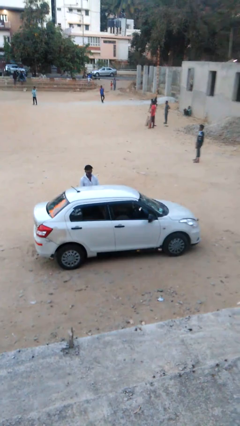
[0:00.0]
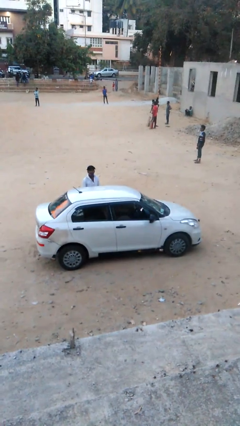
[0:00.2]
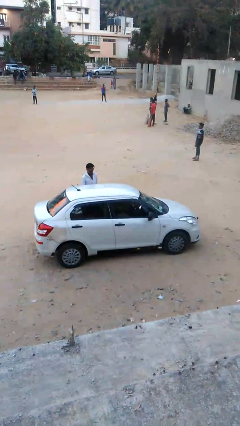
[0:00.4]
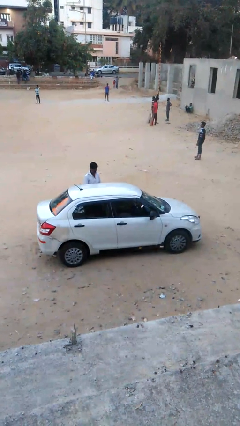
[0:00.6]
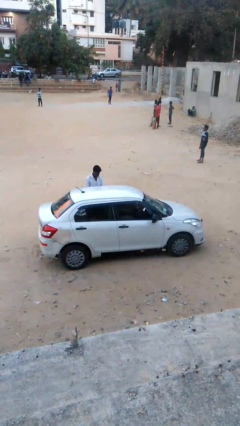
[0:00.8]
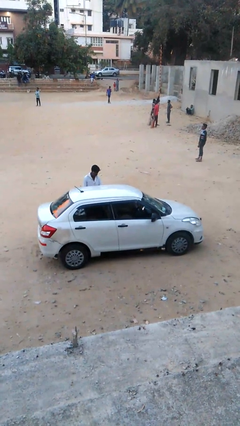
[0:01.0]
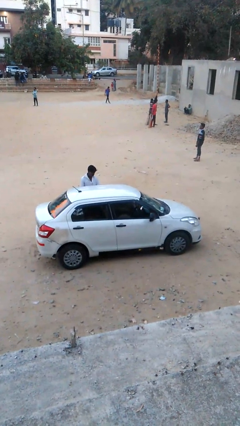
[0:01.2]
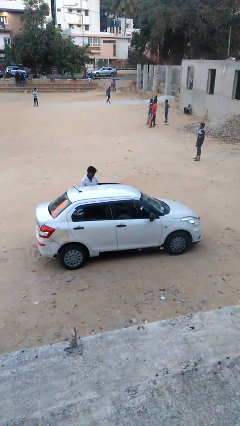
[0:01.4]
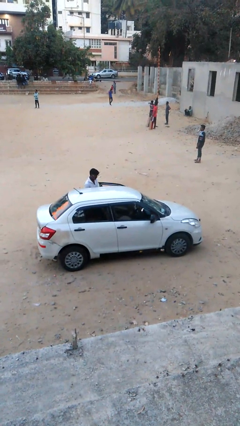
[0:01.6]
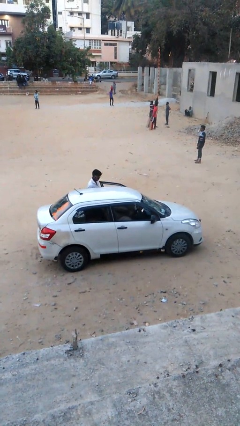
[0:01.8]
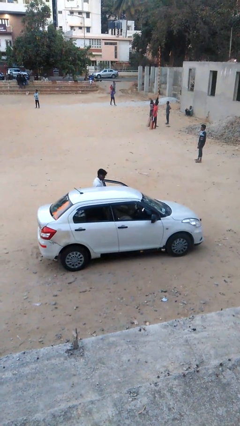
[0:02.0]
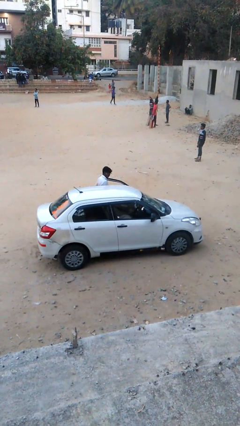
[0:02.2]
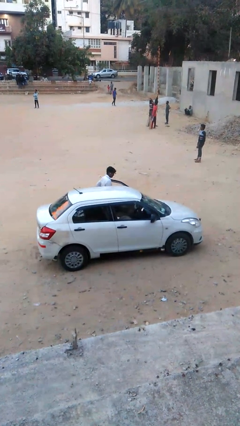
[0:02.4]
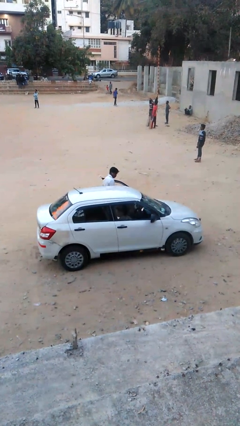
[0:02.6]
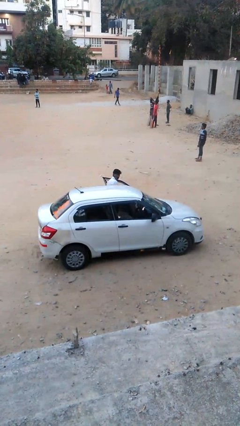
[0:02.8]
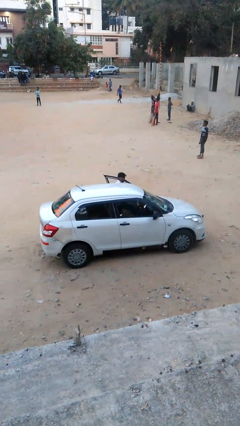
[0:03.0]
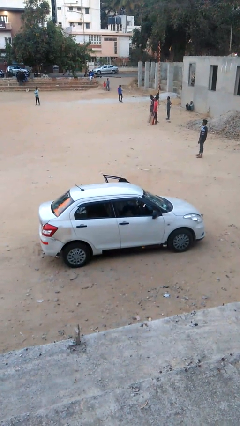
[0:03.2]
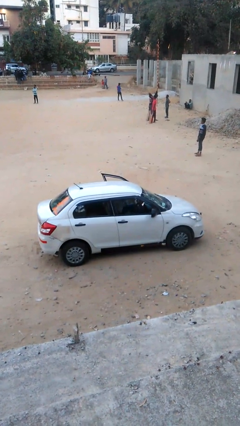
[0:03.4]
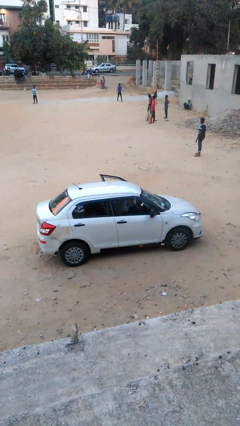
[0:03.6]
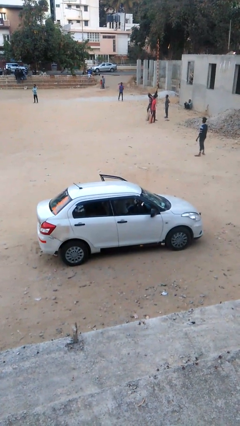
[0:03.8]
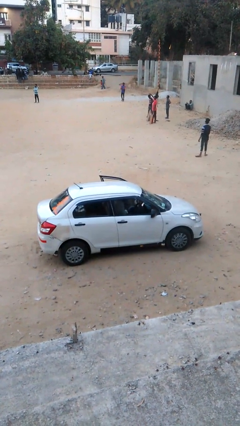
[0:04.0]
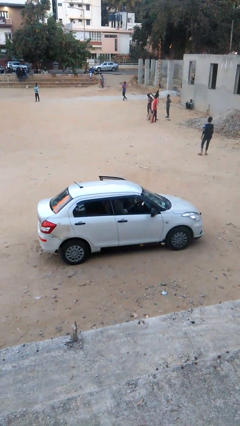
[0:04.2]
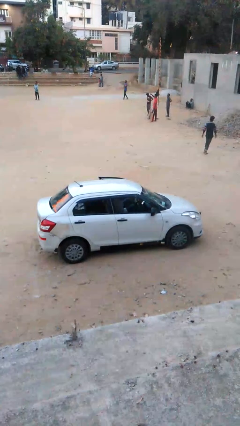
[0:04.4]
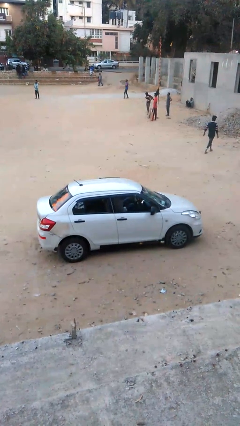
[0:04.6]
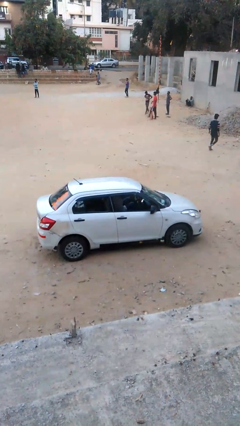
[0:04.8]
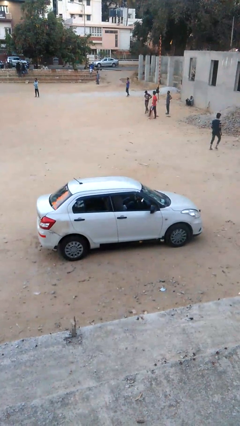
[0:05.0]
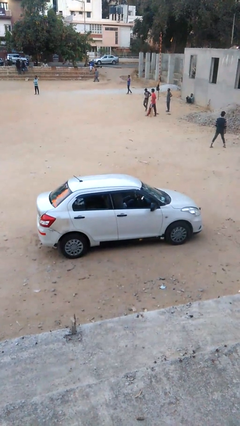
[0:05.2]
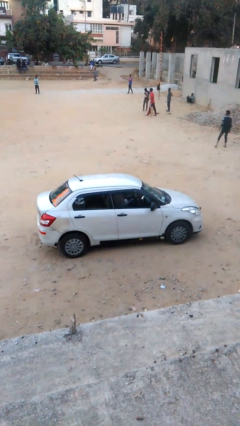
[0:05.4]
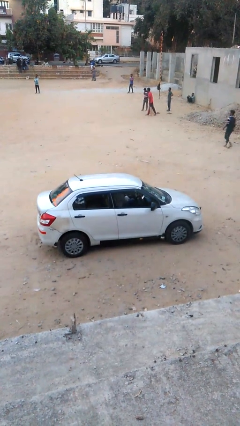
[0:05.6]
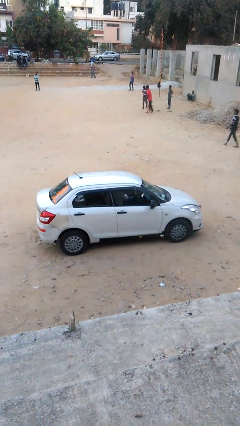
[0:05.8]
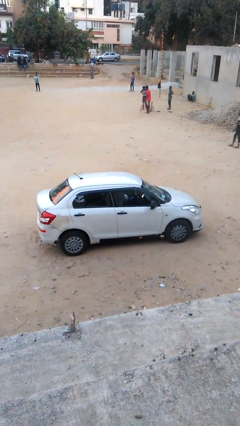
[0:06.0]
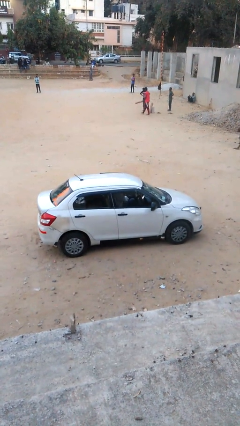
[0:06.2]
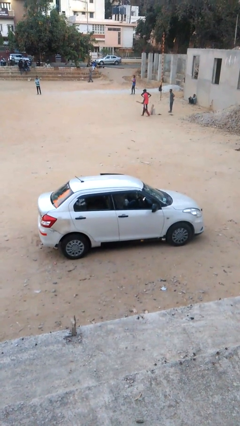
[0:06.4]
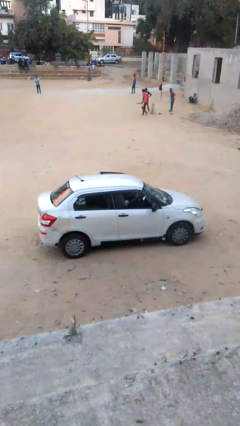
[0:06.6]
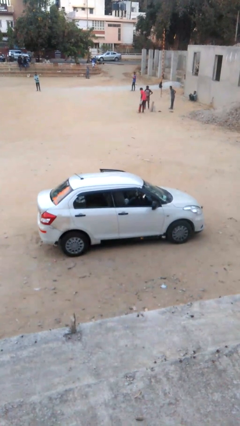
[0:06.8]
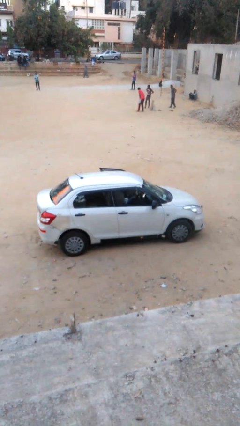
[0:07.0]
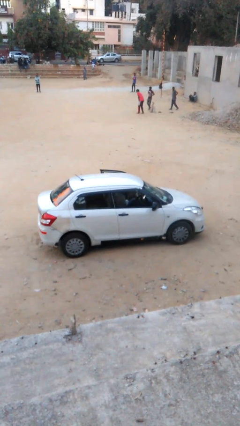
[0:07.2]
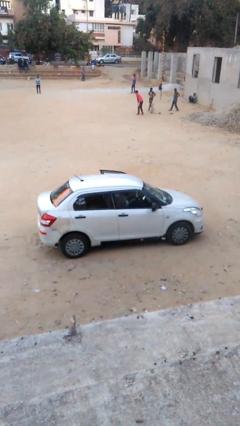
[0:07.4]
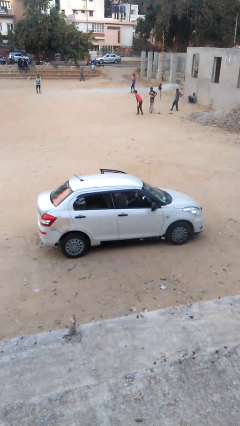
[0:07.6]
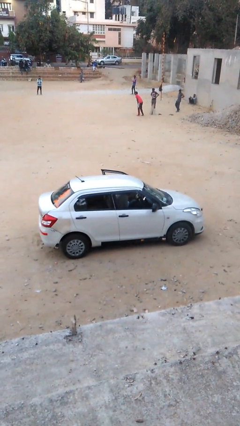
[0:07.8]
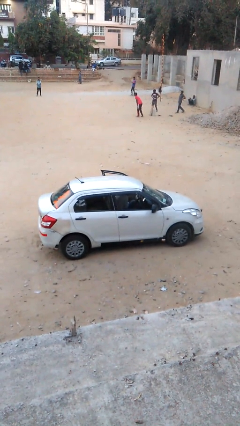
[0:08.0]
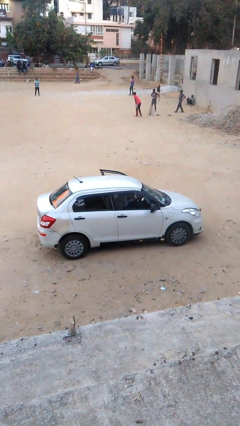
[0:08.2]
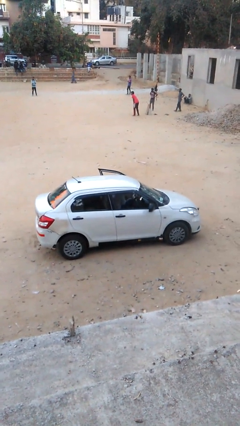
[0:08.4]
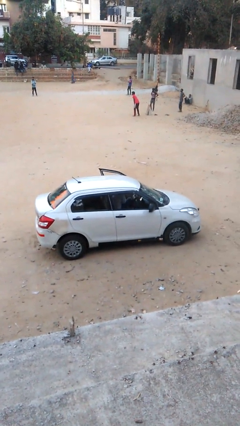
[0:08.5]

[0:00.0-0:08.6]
car picks up person

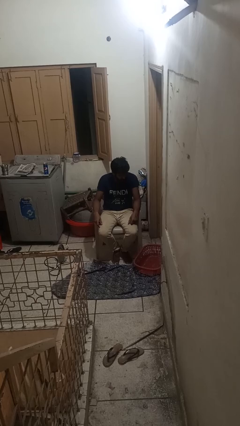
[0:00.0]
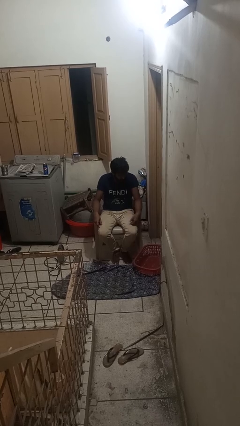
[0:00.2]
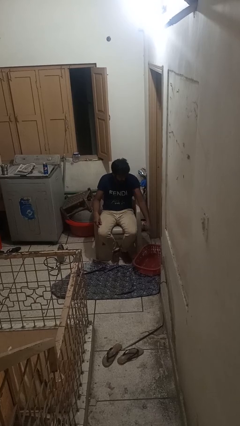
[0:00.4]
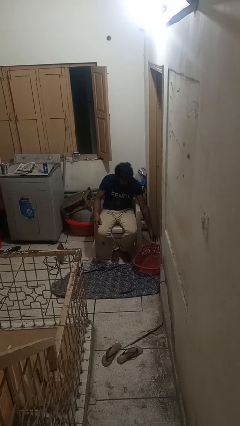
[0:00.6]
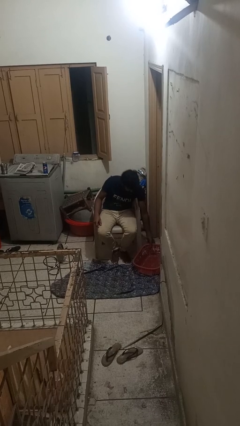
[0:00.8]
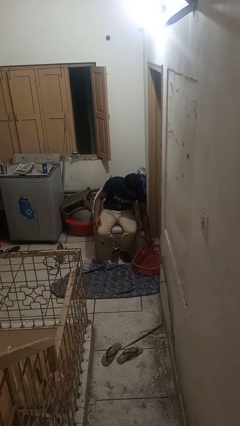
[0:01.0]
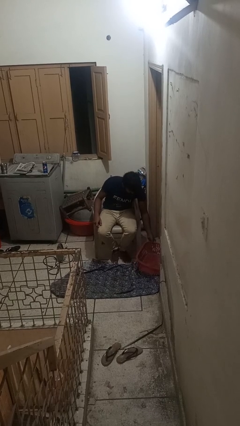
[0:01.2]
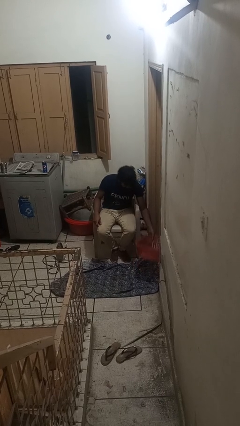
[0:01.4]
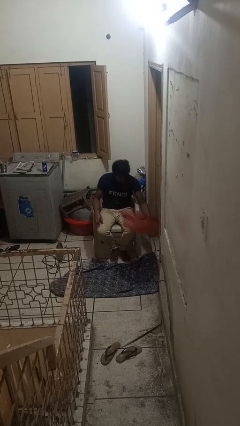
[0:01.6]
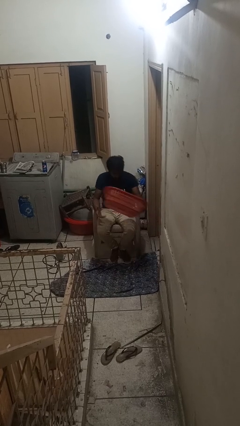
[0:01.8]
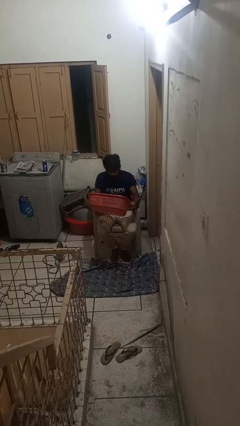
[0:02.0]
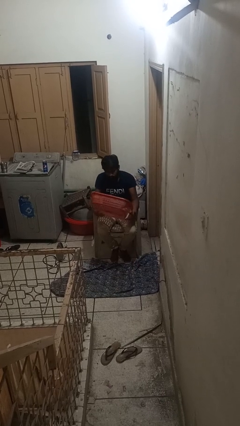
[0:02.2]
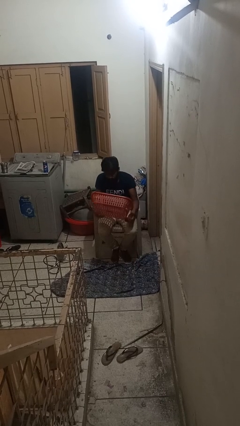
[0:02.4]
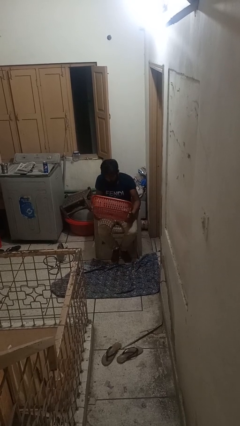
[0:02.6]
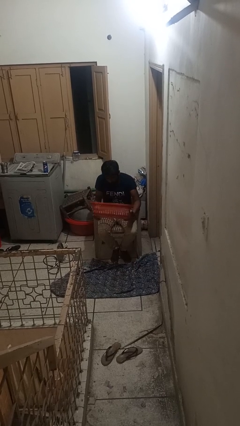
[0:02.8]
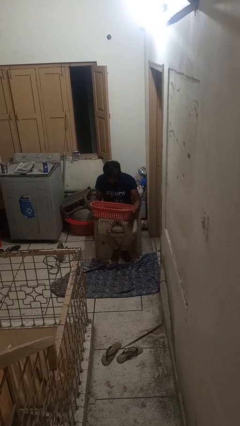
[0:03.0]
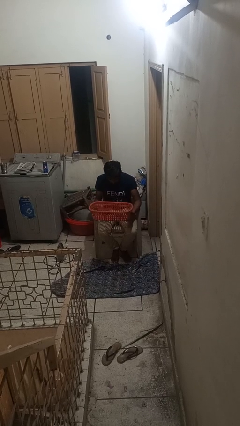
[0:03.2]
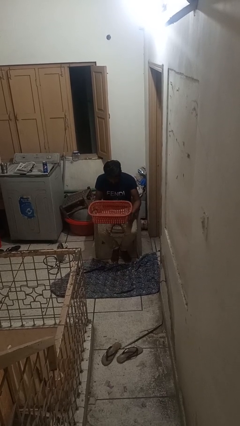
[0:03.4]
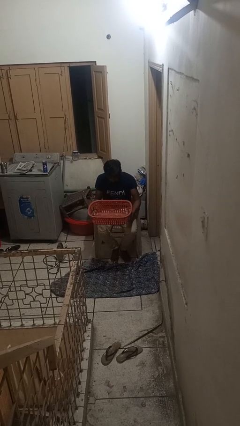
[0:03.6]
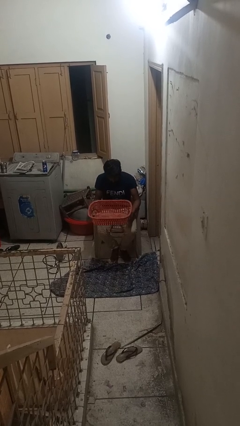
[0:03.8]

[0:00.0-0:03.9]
person picks up object from floor

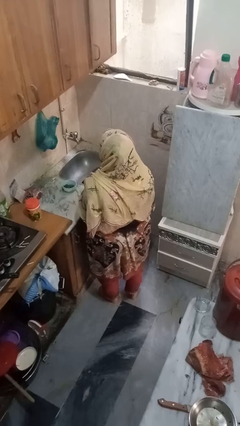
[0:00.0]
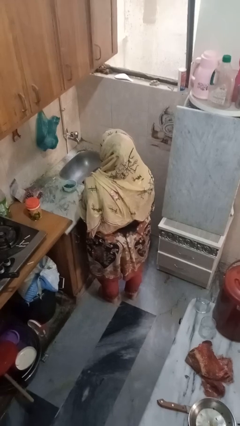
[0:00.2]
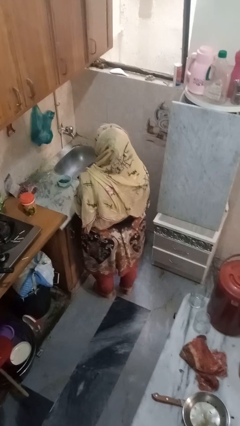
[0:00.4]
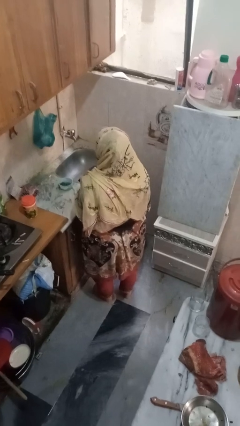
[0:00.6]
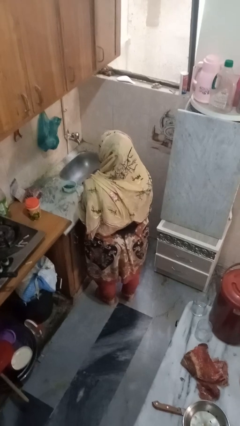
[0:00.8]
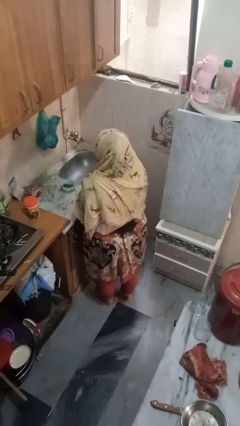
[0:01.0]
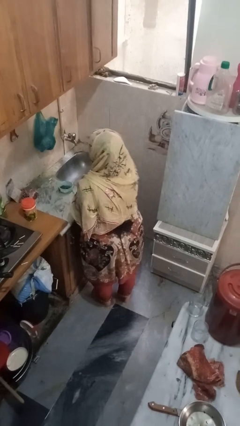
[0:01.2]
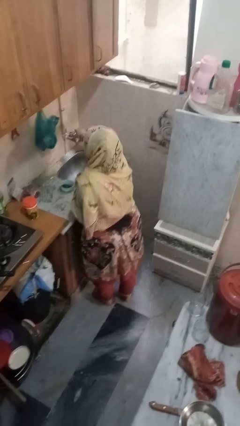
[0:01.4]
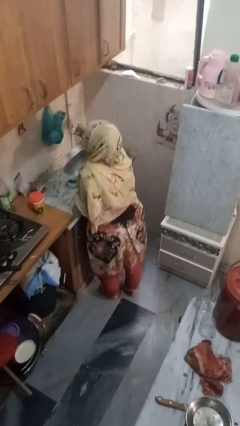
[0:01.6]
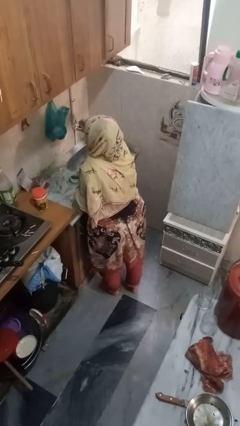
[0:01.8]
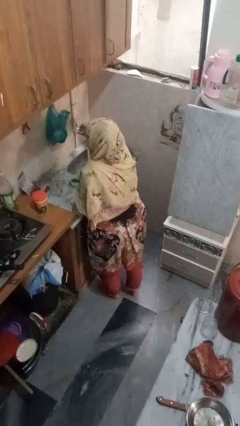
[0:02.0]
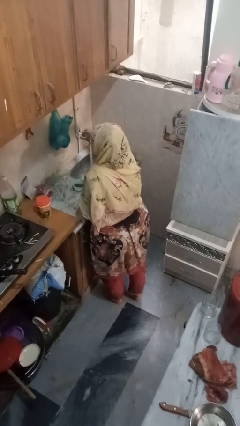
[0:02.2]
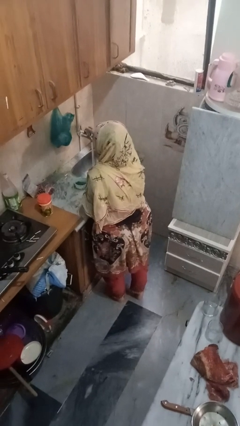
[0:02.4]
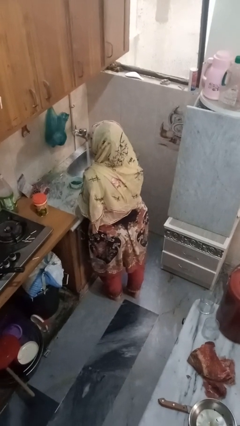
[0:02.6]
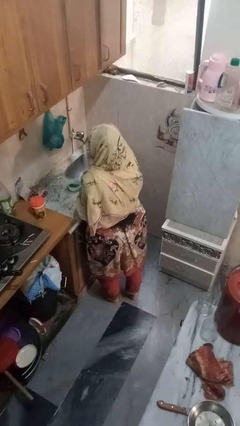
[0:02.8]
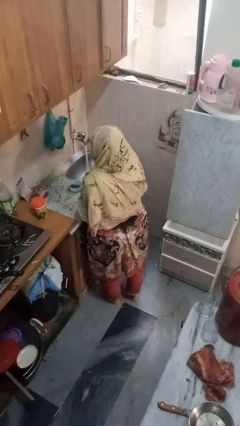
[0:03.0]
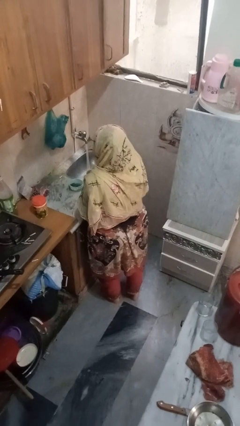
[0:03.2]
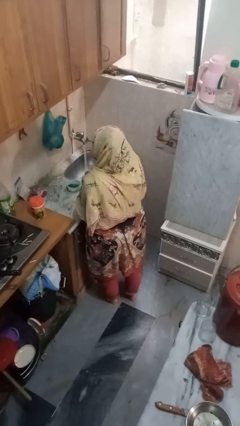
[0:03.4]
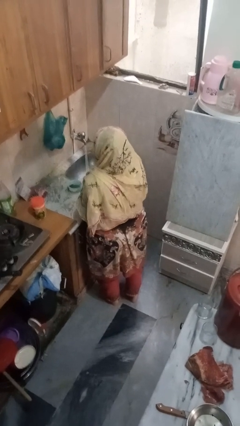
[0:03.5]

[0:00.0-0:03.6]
person turns on faucet

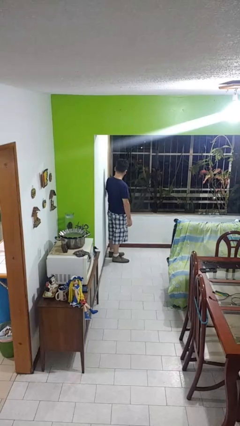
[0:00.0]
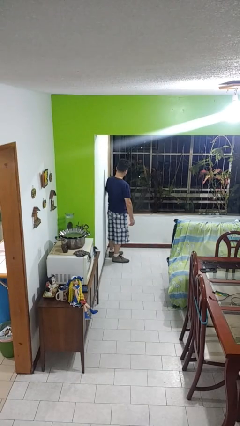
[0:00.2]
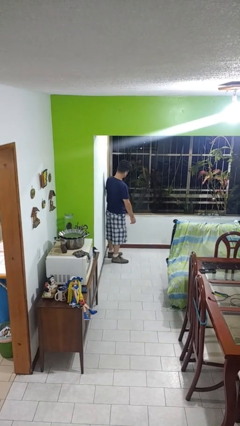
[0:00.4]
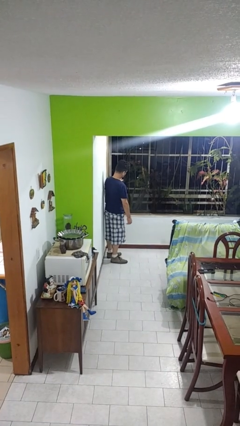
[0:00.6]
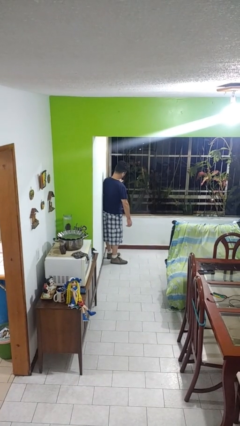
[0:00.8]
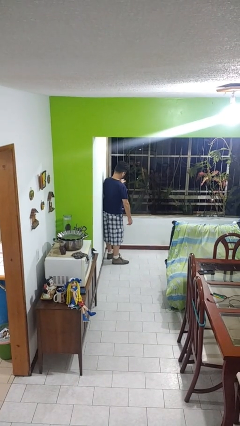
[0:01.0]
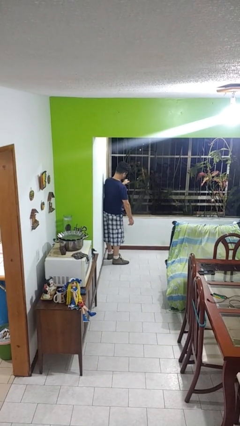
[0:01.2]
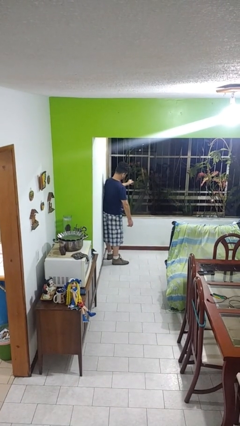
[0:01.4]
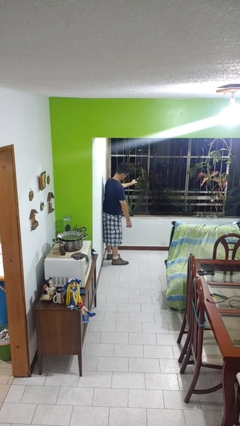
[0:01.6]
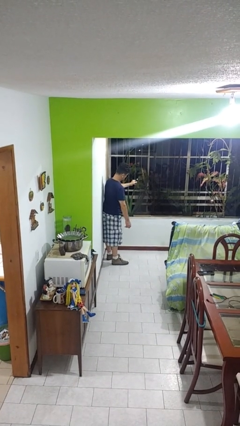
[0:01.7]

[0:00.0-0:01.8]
person opens home window
